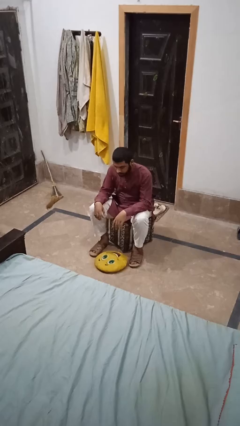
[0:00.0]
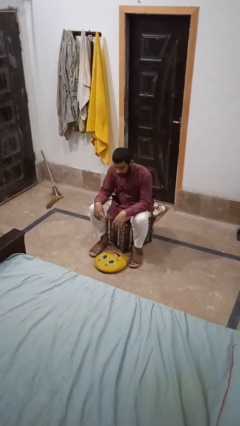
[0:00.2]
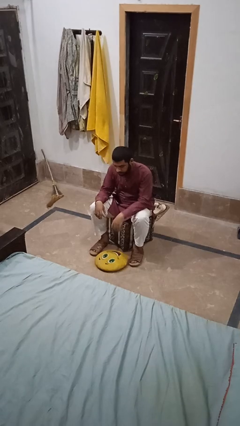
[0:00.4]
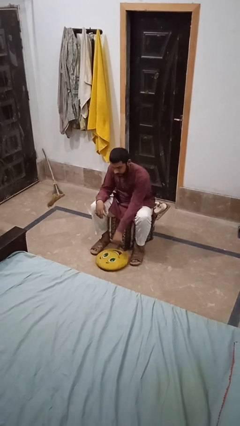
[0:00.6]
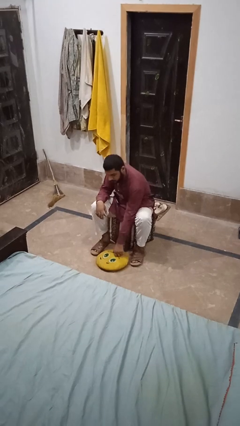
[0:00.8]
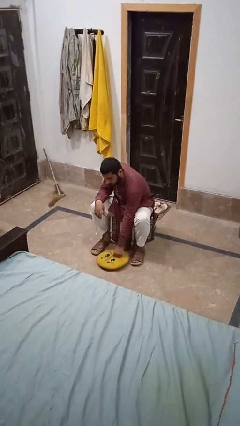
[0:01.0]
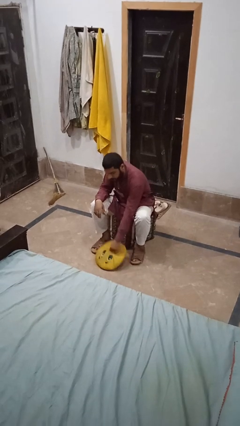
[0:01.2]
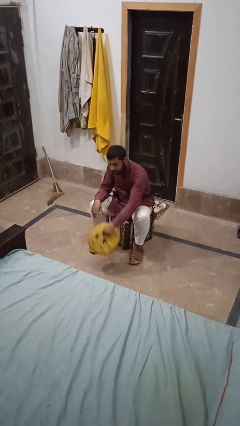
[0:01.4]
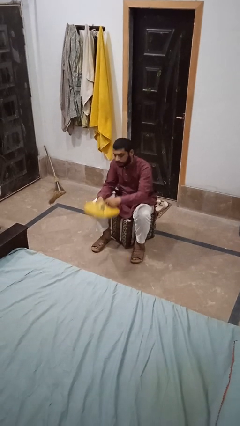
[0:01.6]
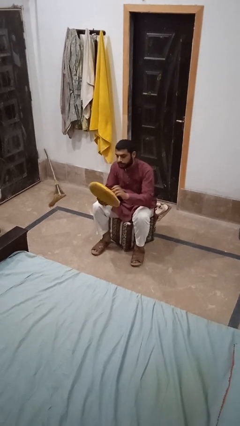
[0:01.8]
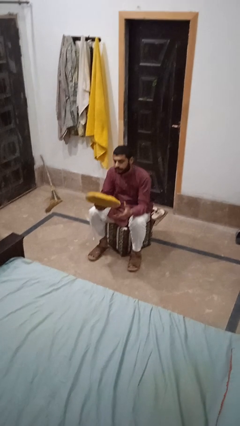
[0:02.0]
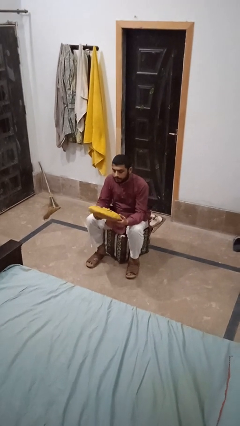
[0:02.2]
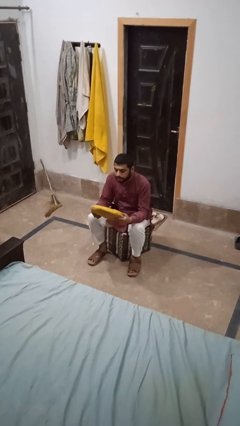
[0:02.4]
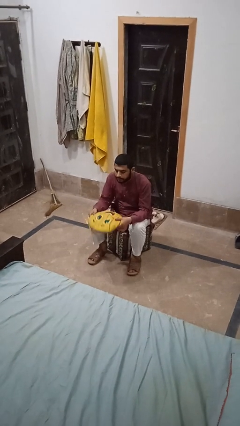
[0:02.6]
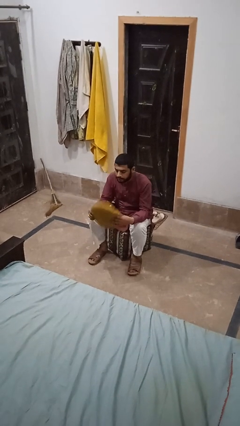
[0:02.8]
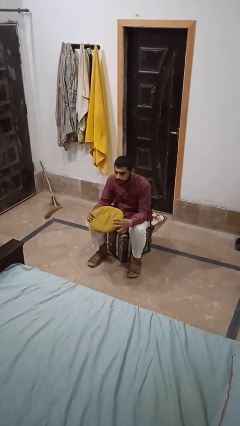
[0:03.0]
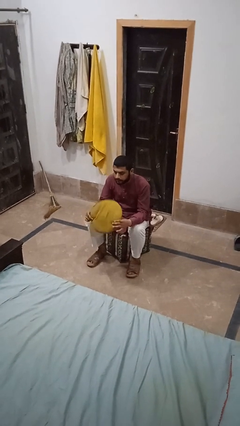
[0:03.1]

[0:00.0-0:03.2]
person picks up object from floor

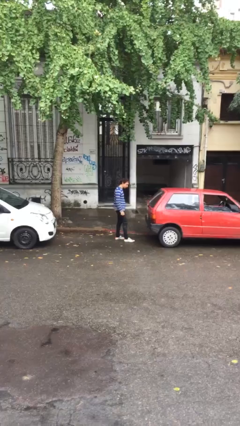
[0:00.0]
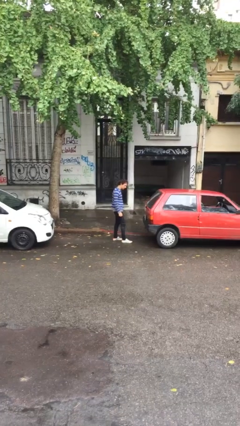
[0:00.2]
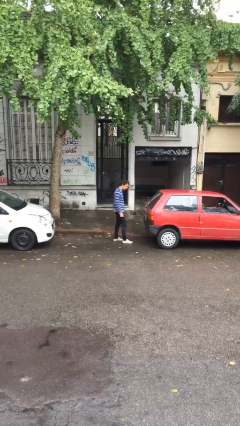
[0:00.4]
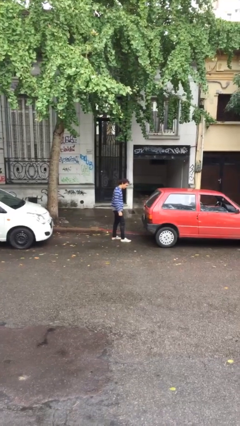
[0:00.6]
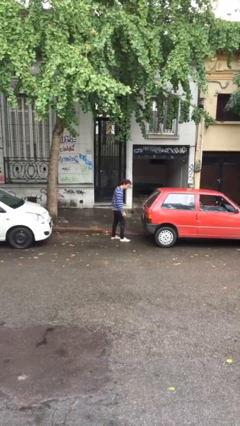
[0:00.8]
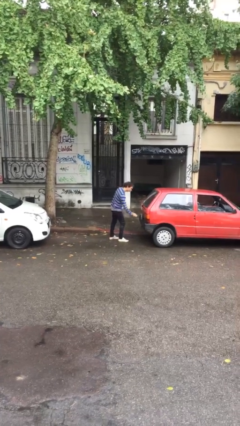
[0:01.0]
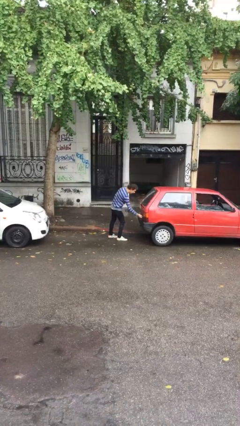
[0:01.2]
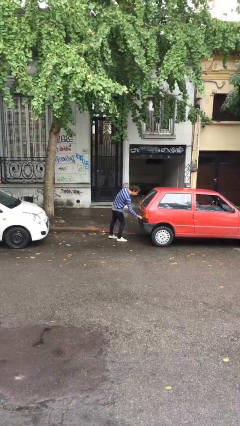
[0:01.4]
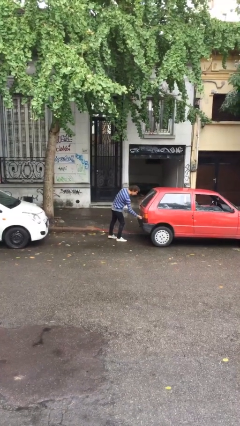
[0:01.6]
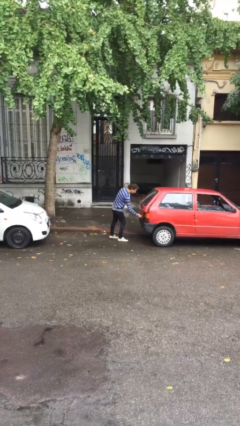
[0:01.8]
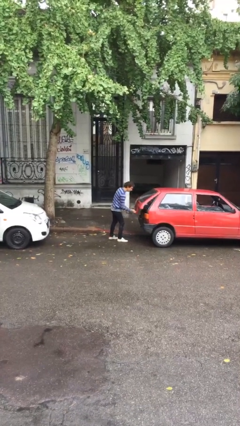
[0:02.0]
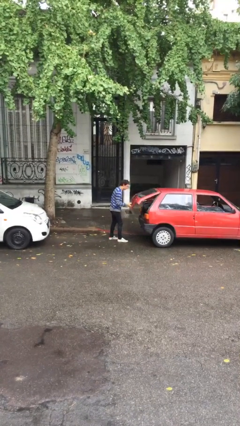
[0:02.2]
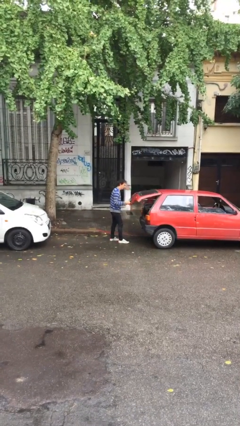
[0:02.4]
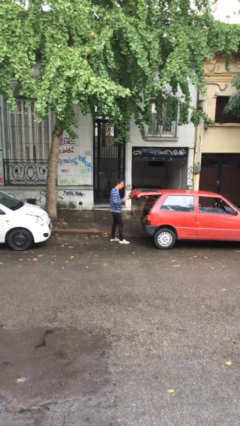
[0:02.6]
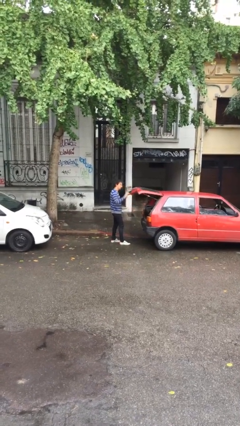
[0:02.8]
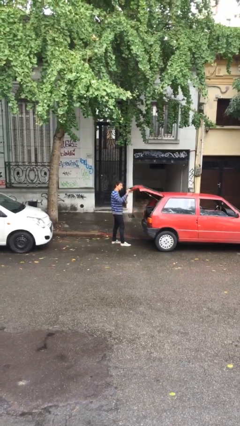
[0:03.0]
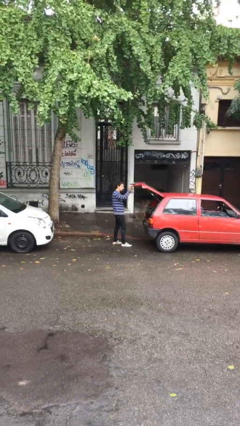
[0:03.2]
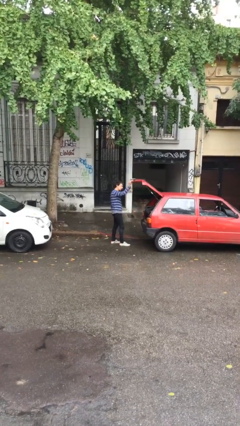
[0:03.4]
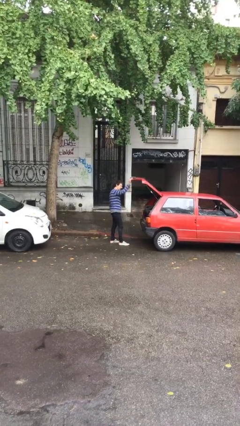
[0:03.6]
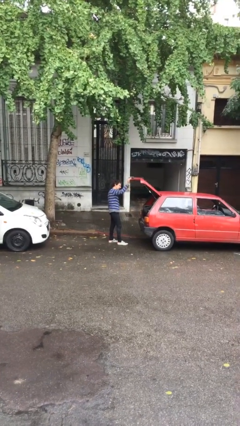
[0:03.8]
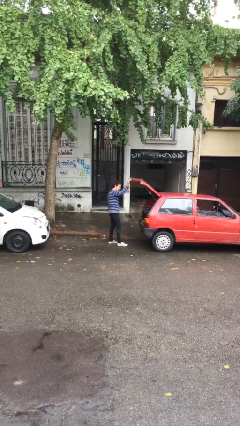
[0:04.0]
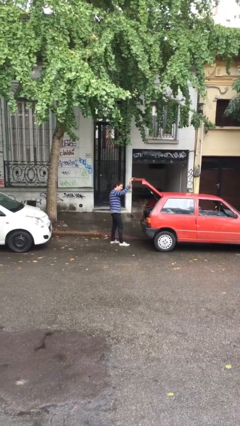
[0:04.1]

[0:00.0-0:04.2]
person opens car trunk

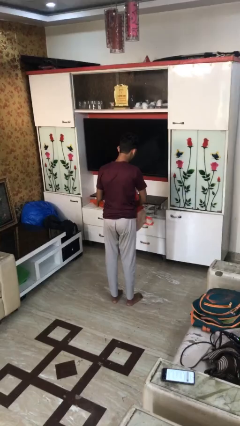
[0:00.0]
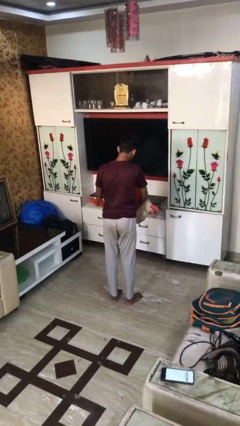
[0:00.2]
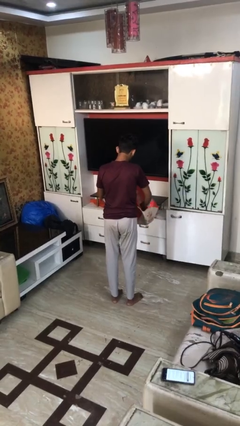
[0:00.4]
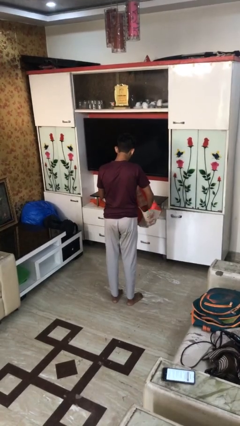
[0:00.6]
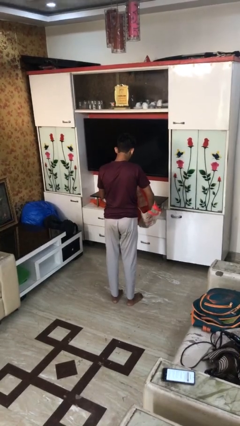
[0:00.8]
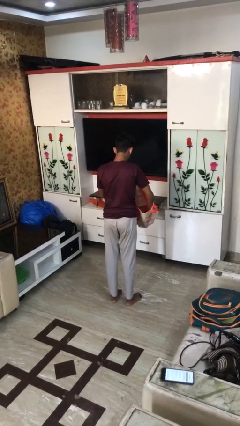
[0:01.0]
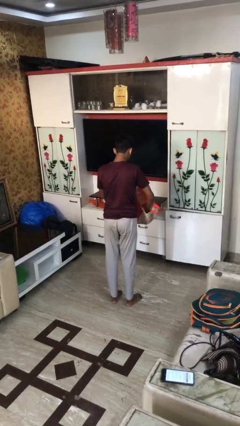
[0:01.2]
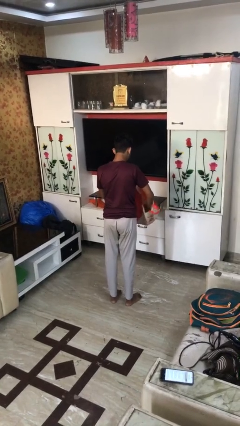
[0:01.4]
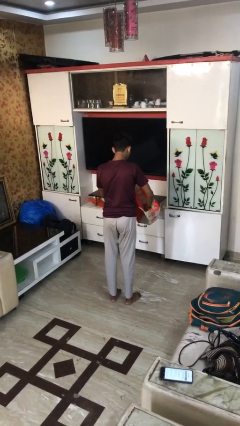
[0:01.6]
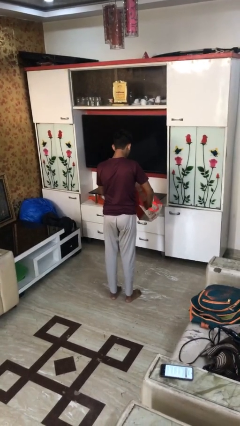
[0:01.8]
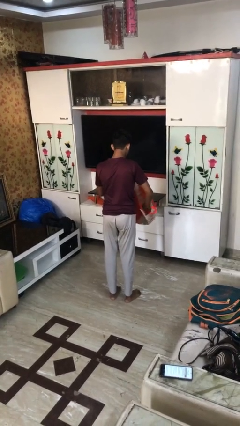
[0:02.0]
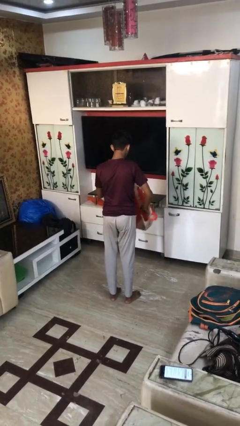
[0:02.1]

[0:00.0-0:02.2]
person searches in bag

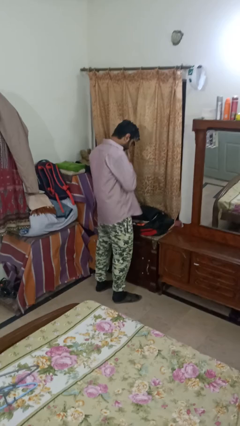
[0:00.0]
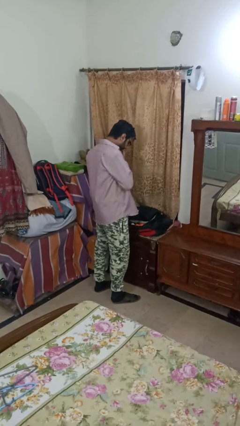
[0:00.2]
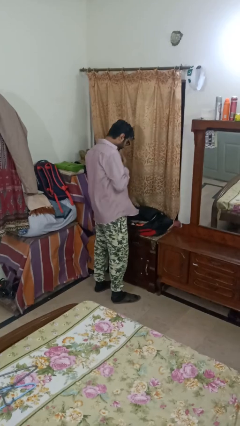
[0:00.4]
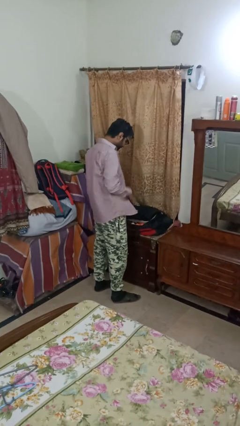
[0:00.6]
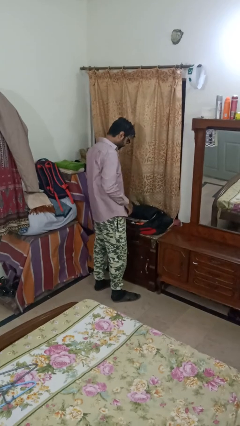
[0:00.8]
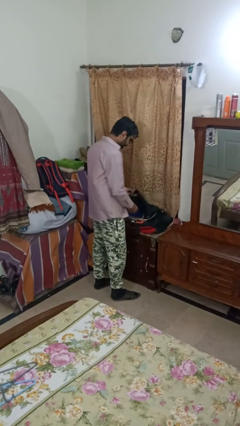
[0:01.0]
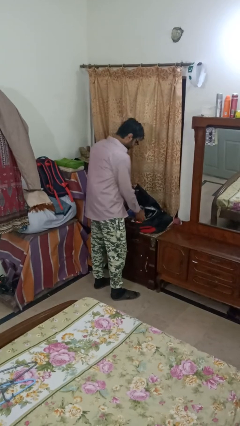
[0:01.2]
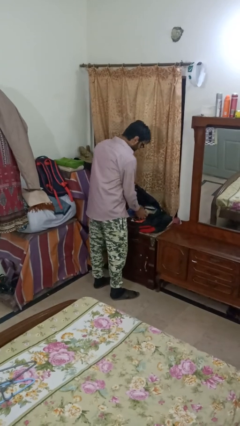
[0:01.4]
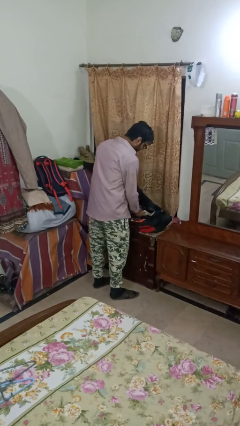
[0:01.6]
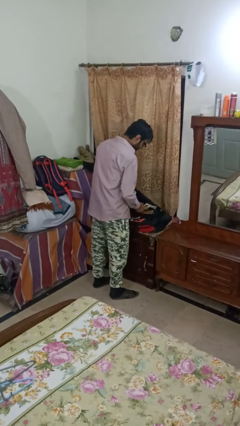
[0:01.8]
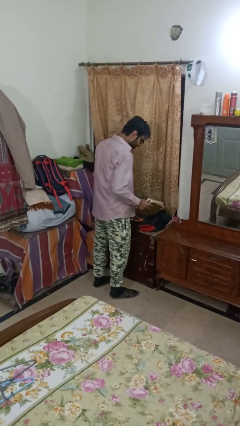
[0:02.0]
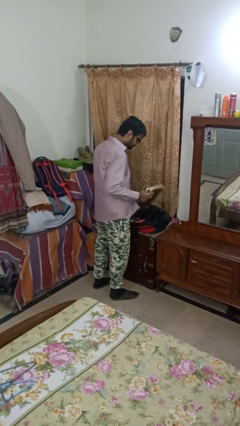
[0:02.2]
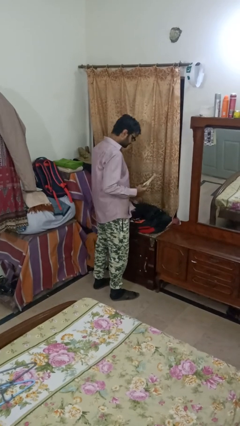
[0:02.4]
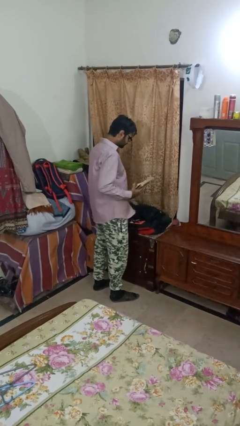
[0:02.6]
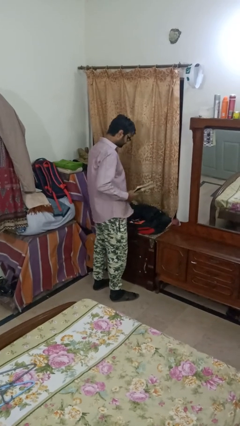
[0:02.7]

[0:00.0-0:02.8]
person takes object from bag

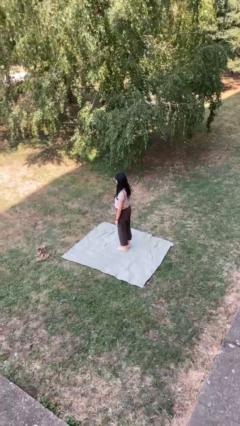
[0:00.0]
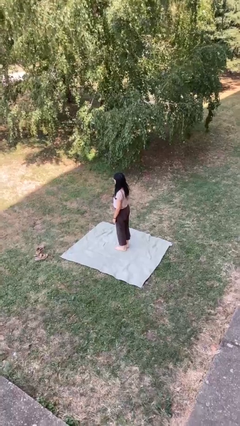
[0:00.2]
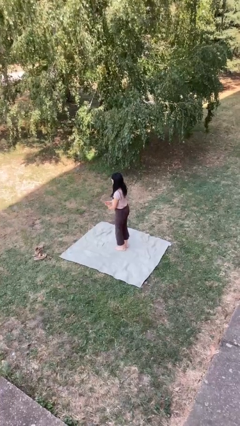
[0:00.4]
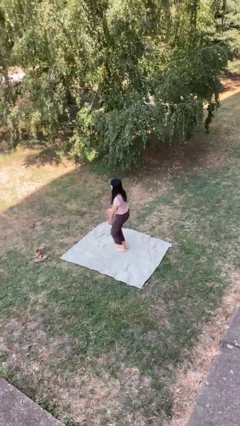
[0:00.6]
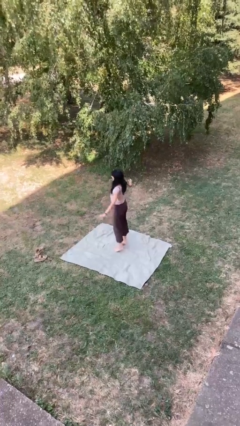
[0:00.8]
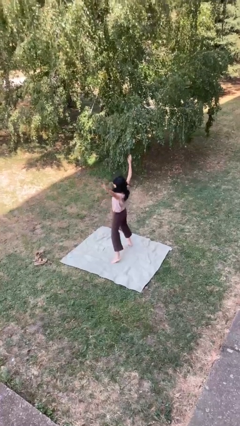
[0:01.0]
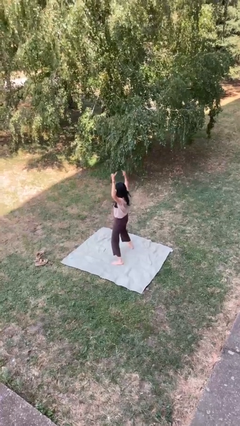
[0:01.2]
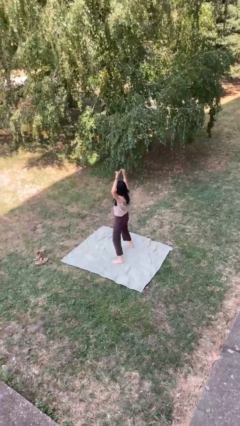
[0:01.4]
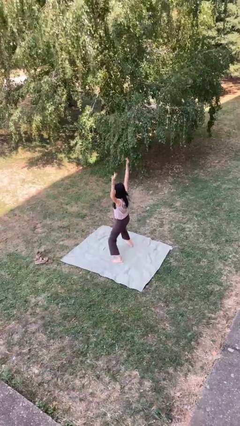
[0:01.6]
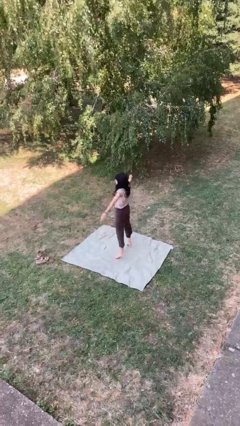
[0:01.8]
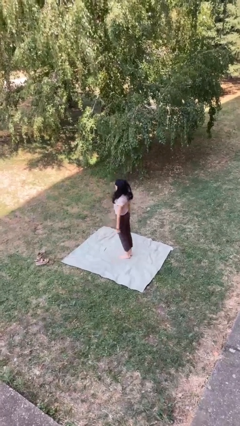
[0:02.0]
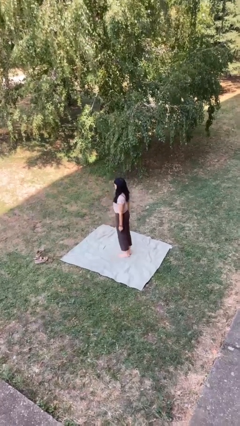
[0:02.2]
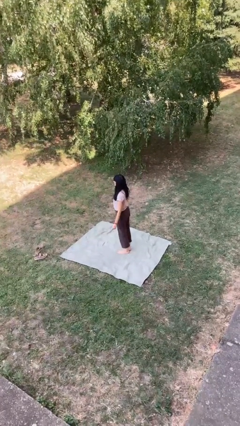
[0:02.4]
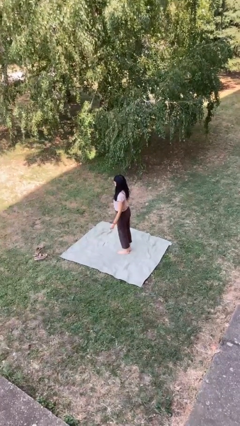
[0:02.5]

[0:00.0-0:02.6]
person exercises with jumping jacks

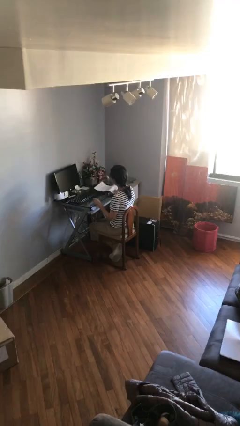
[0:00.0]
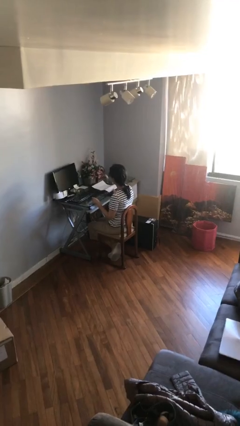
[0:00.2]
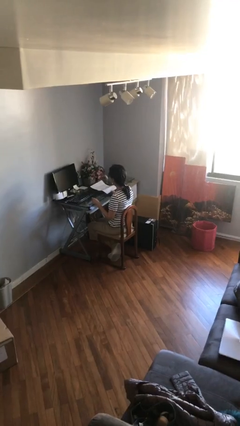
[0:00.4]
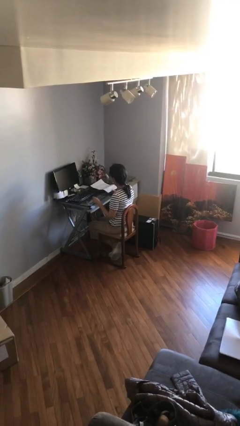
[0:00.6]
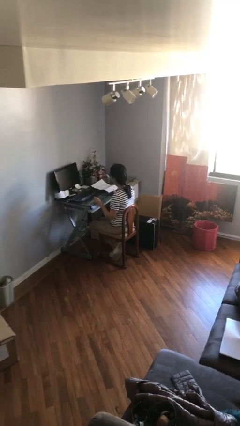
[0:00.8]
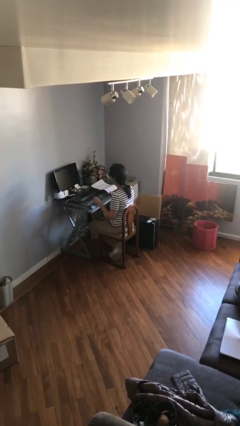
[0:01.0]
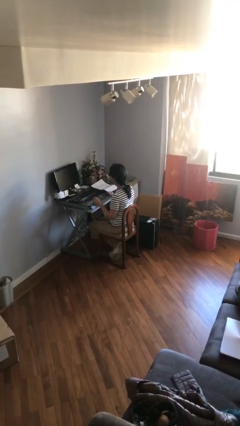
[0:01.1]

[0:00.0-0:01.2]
person puts down object on table

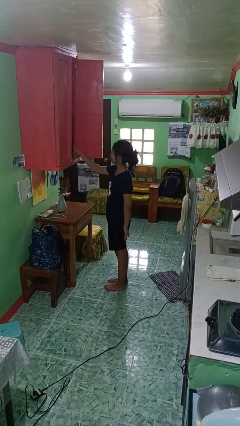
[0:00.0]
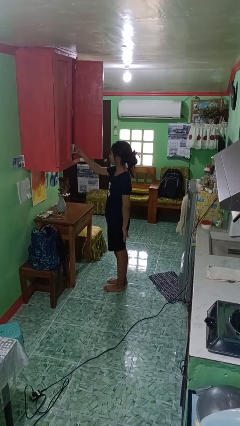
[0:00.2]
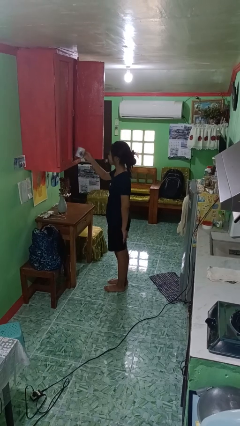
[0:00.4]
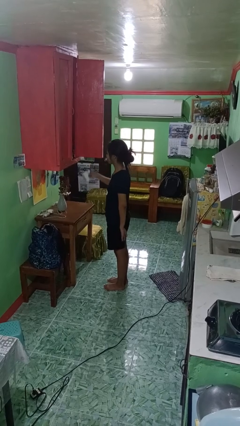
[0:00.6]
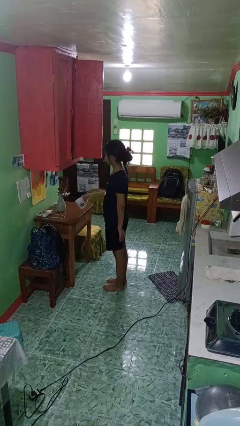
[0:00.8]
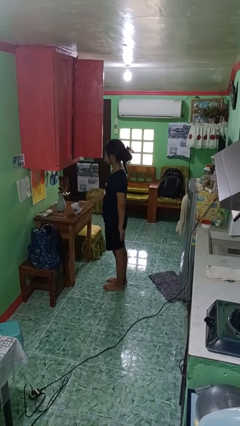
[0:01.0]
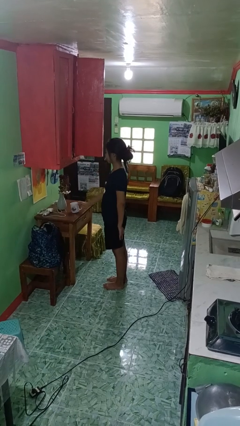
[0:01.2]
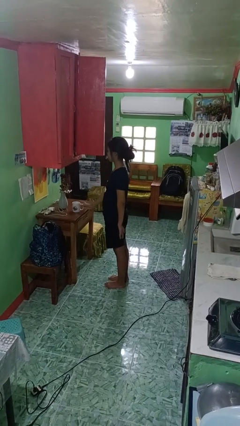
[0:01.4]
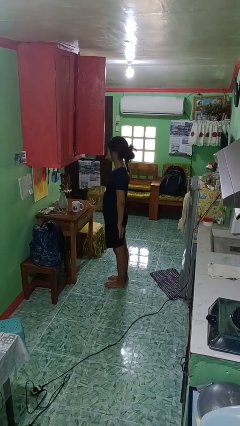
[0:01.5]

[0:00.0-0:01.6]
person takes object from cabinet
